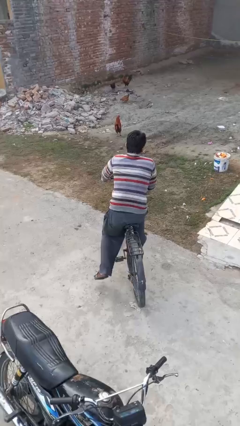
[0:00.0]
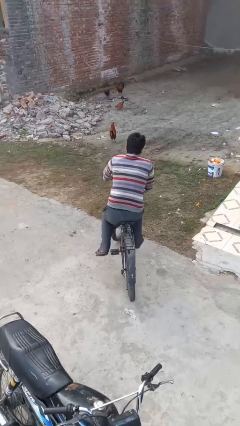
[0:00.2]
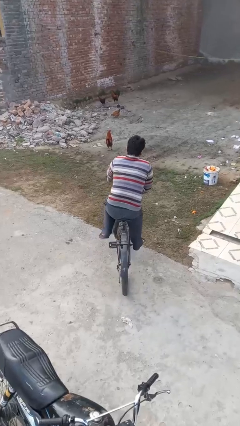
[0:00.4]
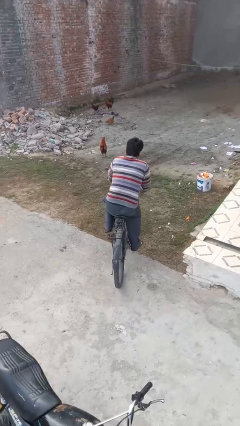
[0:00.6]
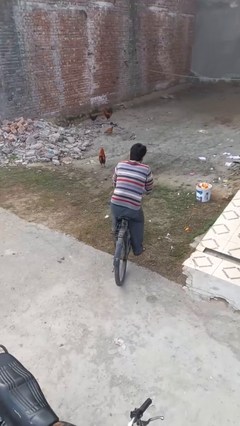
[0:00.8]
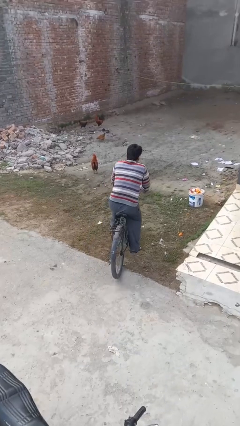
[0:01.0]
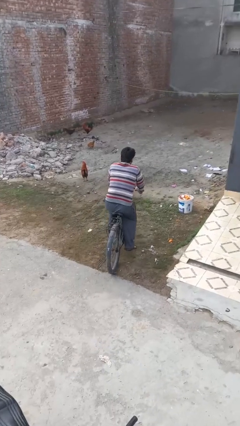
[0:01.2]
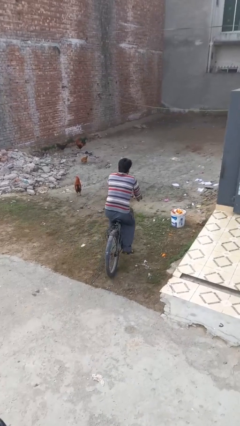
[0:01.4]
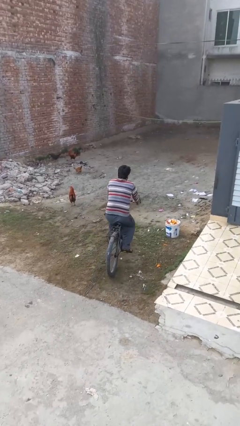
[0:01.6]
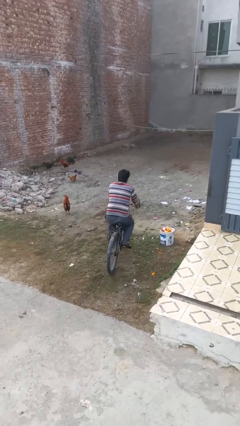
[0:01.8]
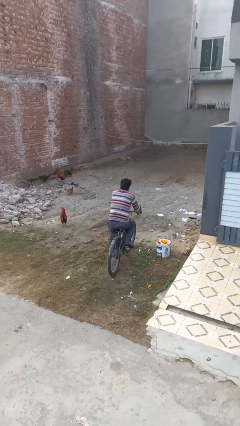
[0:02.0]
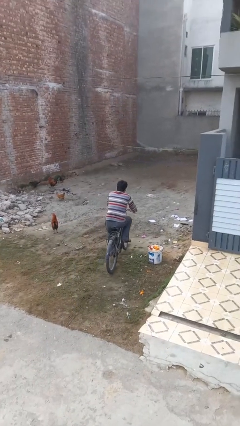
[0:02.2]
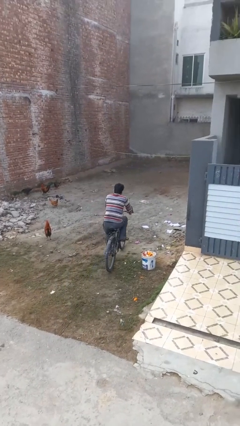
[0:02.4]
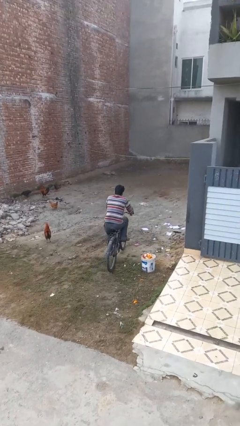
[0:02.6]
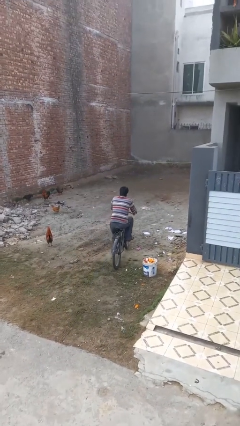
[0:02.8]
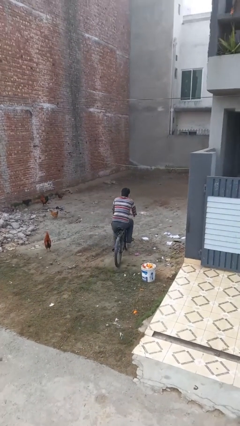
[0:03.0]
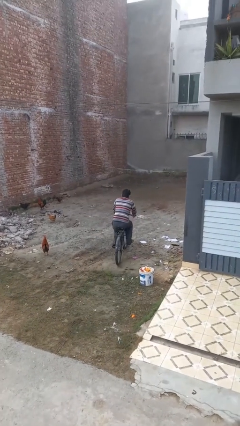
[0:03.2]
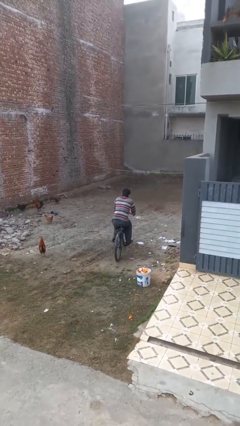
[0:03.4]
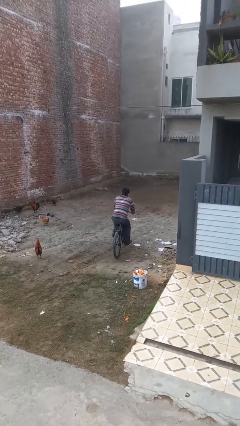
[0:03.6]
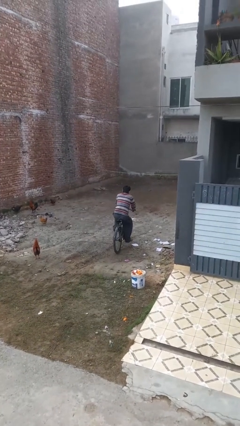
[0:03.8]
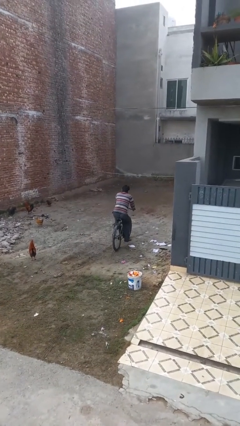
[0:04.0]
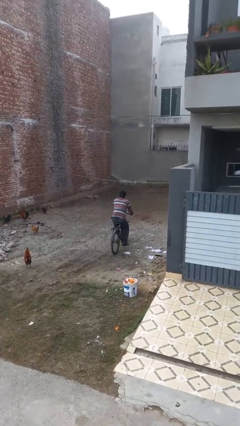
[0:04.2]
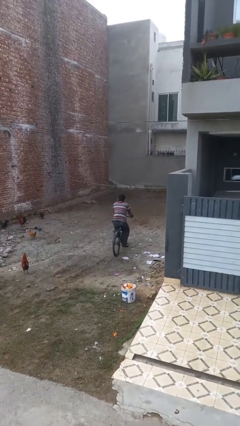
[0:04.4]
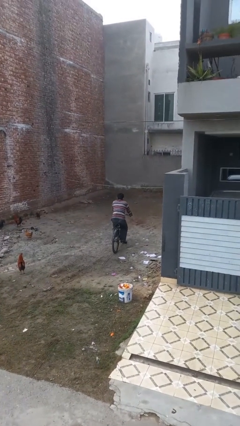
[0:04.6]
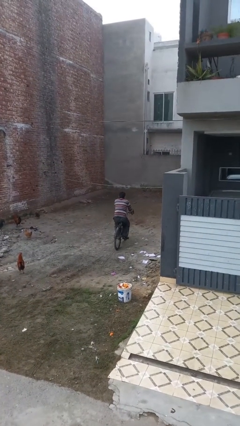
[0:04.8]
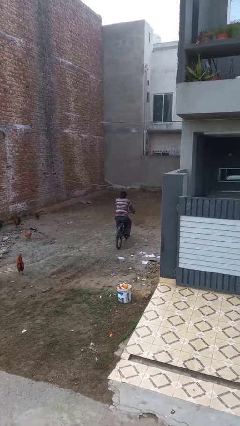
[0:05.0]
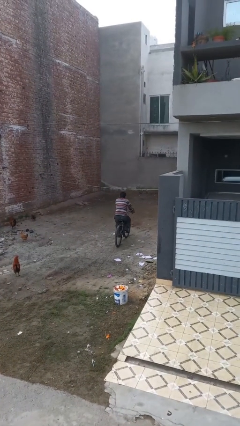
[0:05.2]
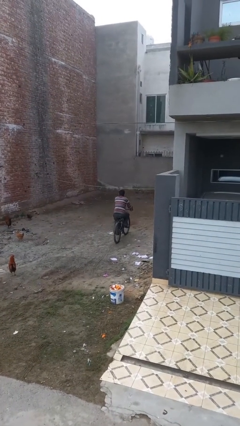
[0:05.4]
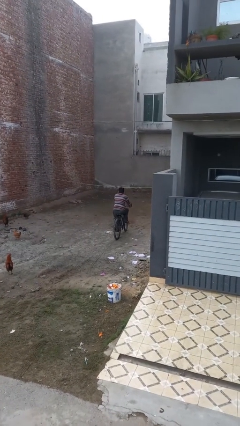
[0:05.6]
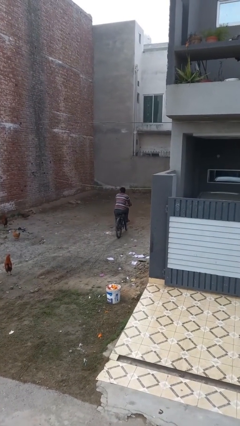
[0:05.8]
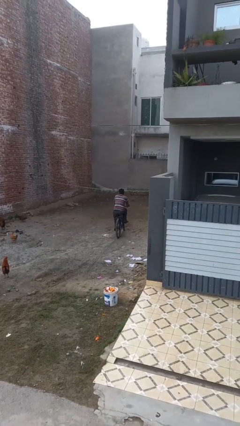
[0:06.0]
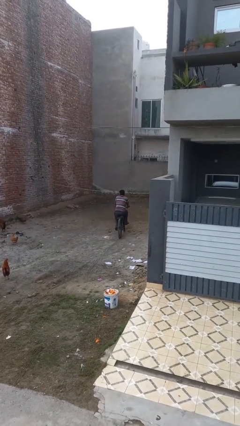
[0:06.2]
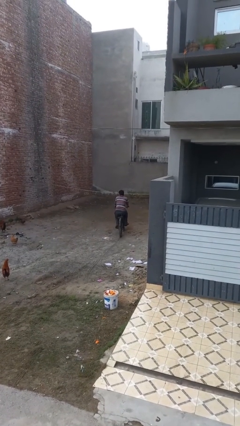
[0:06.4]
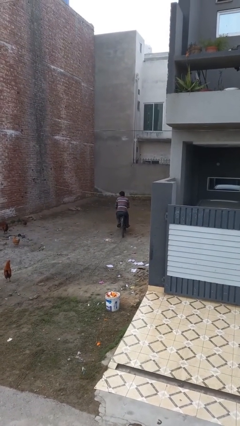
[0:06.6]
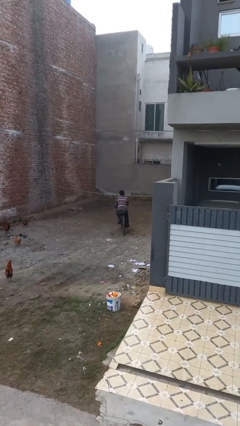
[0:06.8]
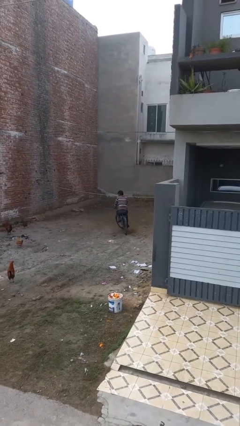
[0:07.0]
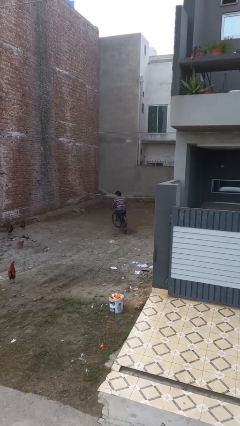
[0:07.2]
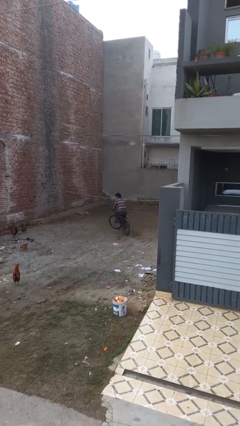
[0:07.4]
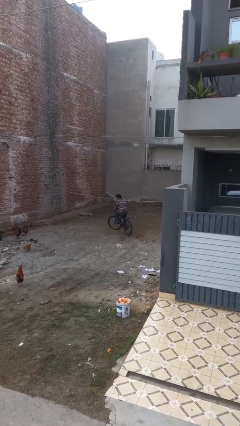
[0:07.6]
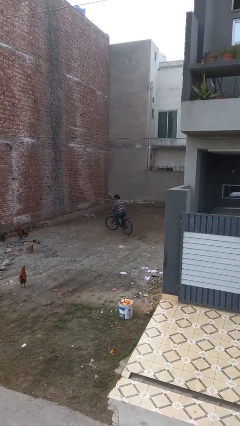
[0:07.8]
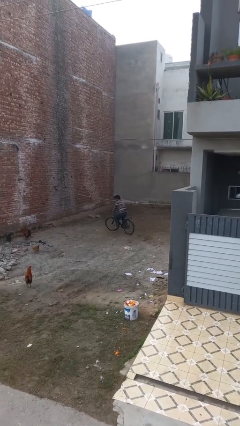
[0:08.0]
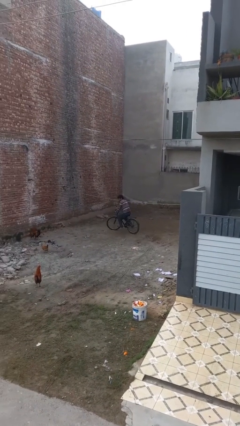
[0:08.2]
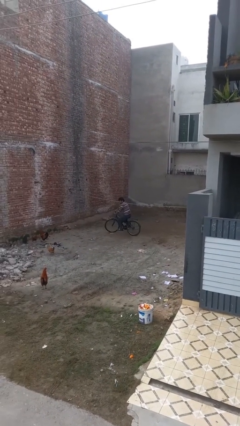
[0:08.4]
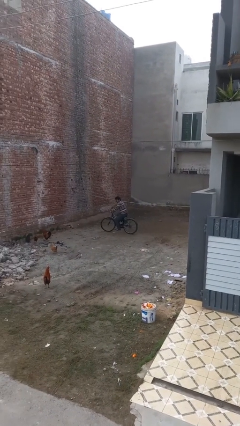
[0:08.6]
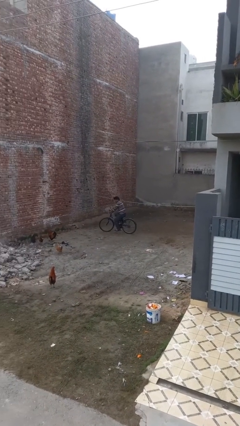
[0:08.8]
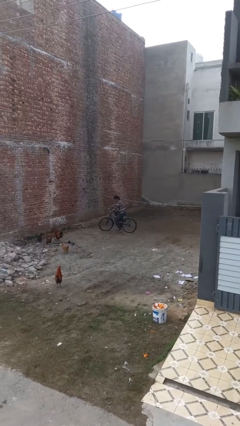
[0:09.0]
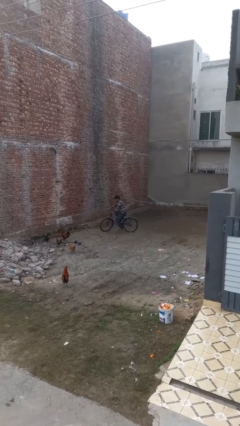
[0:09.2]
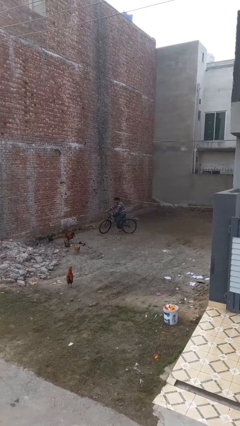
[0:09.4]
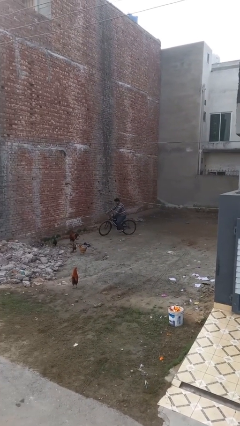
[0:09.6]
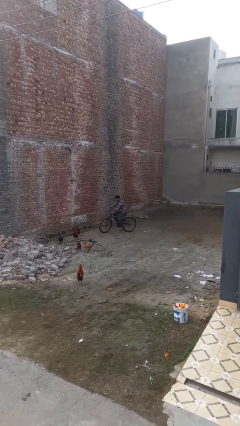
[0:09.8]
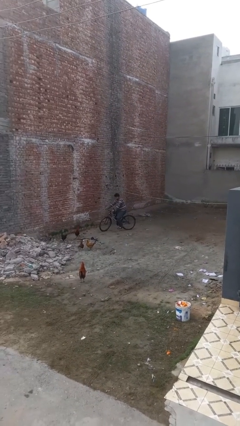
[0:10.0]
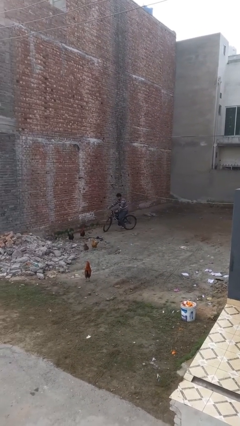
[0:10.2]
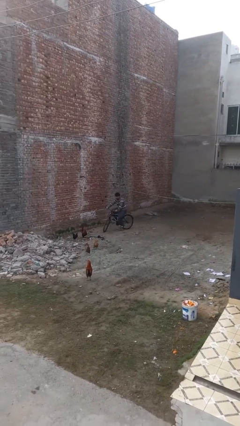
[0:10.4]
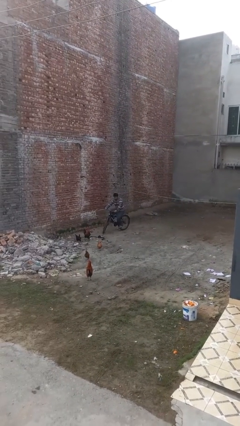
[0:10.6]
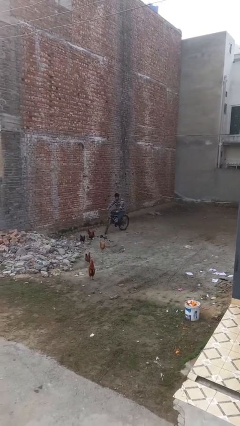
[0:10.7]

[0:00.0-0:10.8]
person rides bicycle

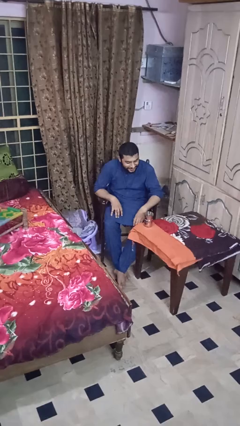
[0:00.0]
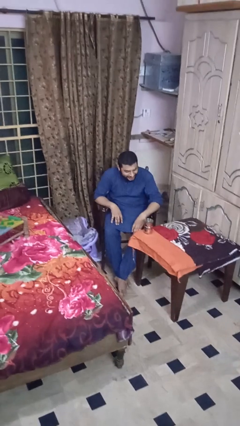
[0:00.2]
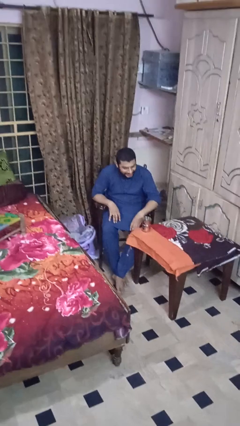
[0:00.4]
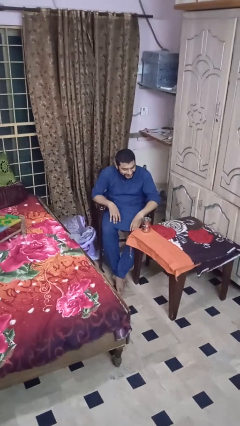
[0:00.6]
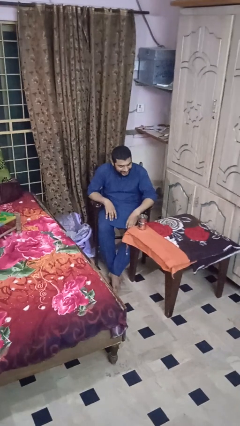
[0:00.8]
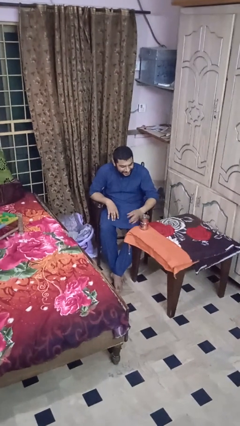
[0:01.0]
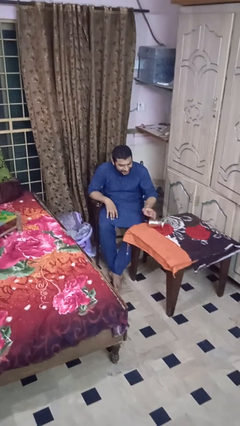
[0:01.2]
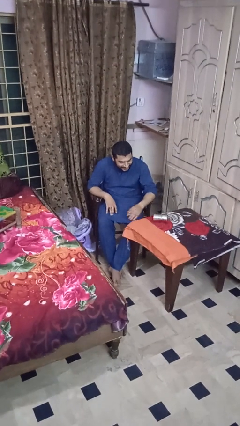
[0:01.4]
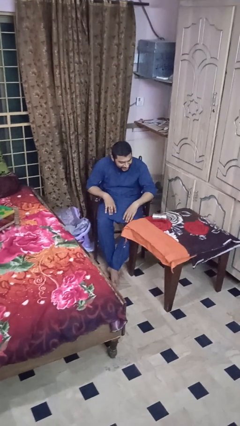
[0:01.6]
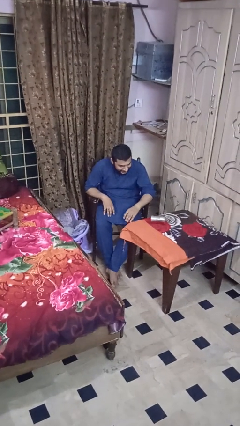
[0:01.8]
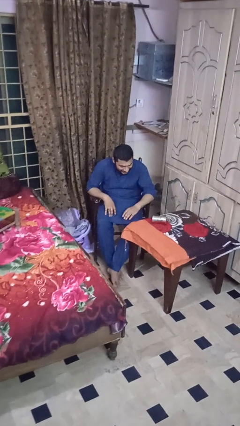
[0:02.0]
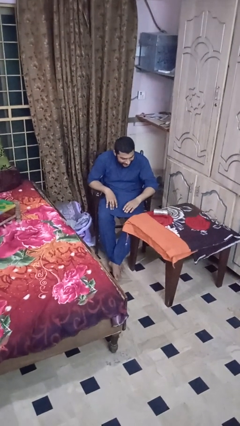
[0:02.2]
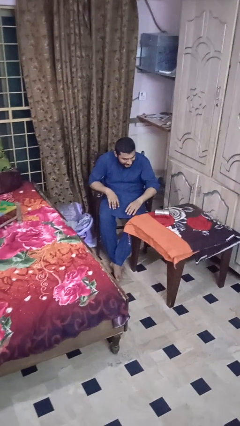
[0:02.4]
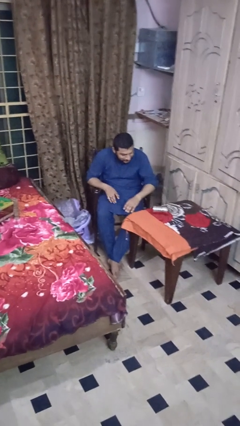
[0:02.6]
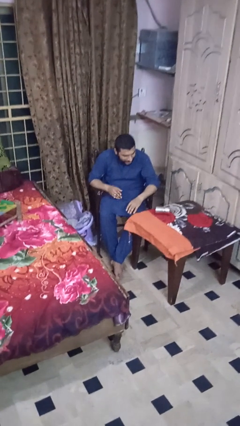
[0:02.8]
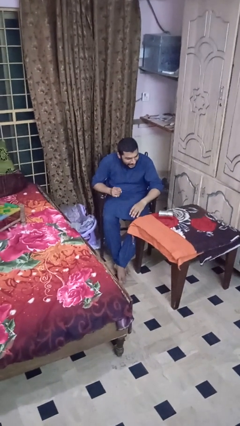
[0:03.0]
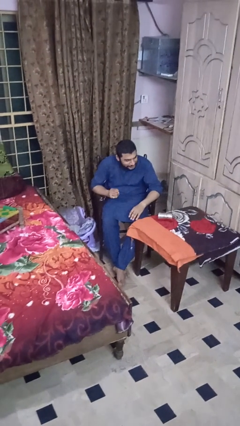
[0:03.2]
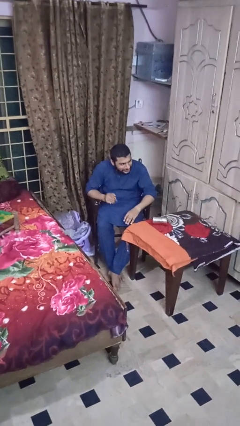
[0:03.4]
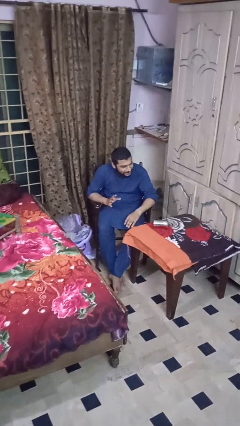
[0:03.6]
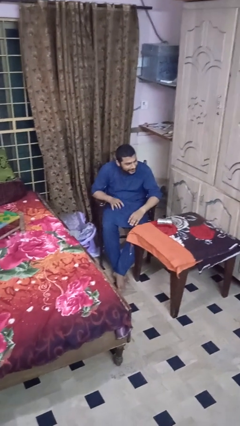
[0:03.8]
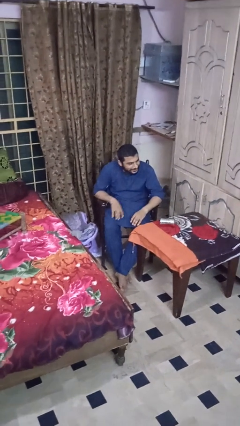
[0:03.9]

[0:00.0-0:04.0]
person knocks over glass

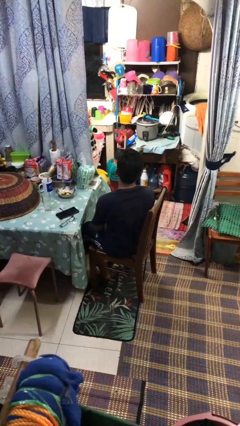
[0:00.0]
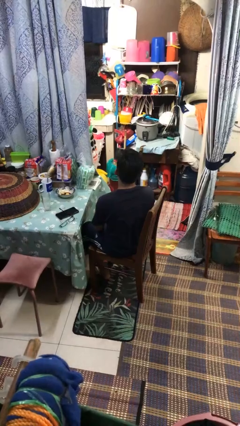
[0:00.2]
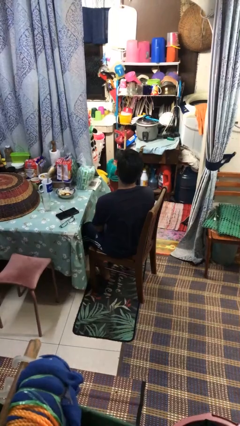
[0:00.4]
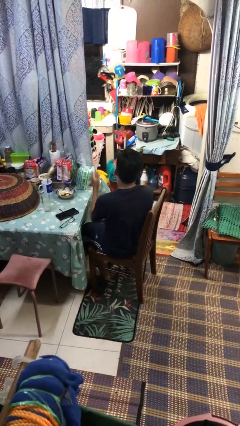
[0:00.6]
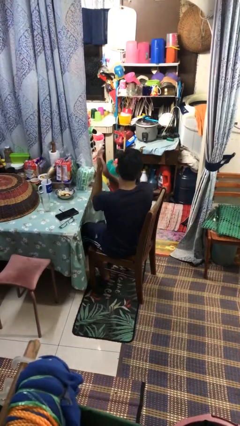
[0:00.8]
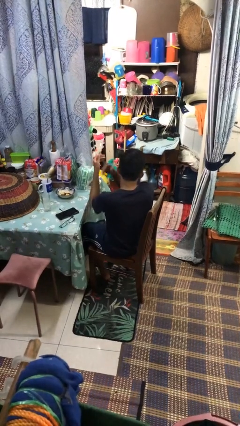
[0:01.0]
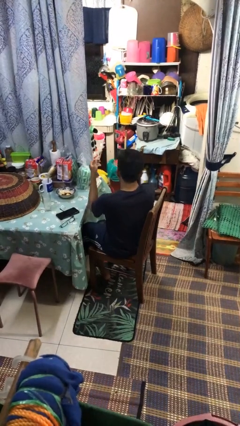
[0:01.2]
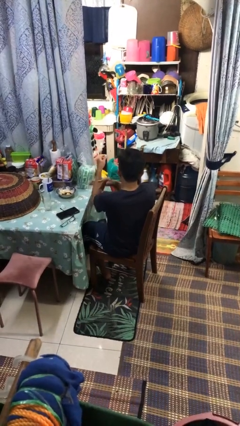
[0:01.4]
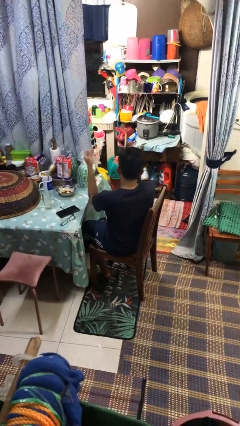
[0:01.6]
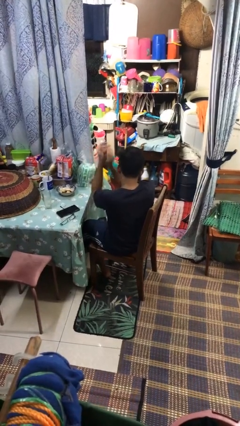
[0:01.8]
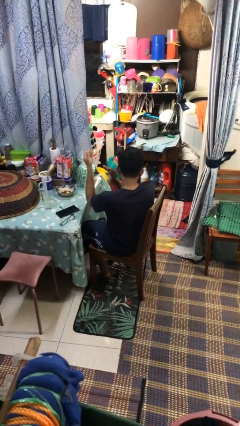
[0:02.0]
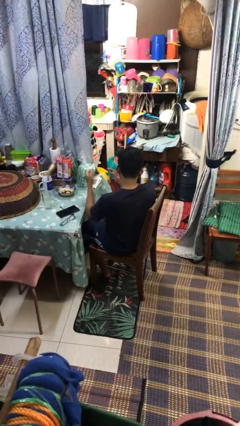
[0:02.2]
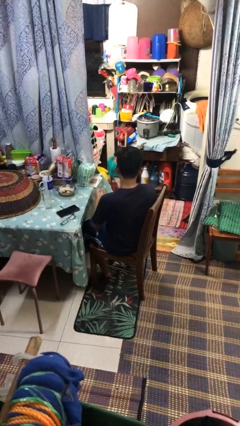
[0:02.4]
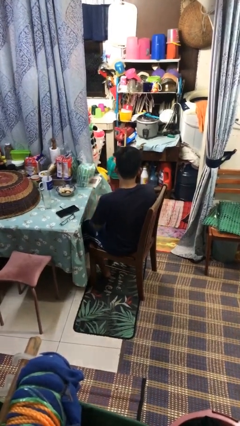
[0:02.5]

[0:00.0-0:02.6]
person swats bug

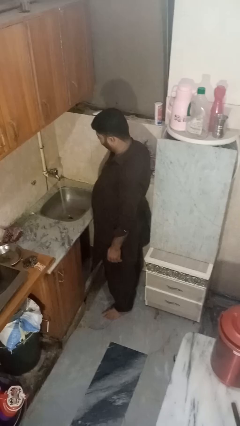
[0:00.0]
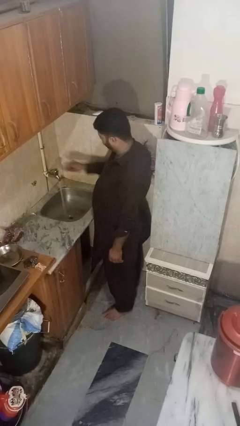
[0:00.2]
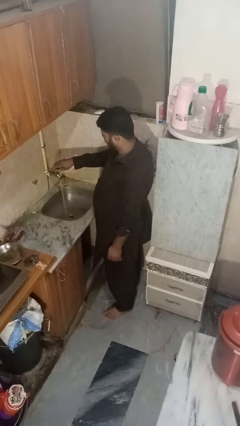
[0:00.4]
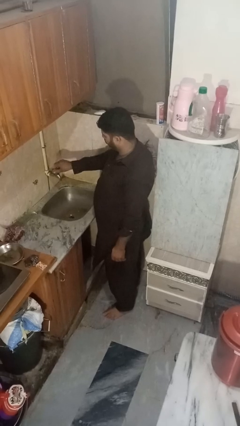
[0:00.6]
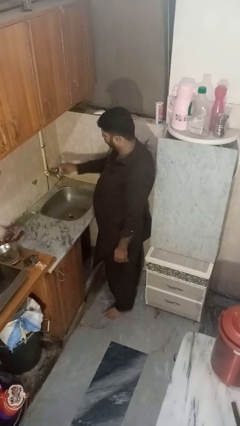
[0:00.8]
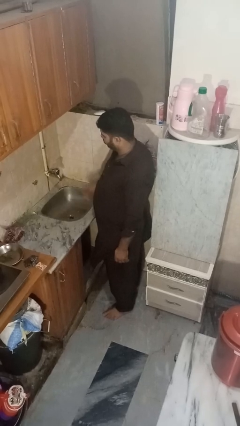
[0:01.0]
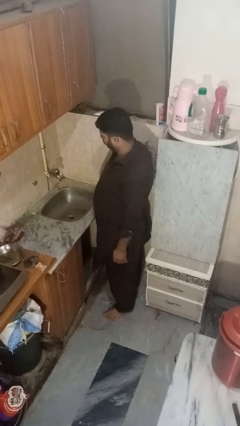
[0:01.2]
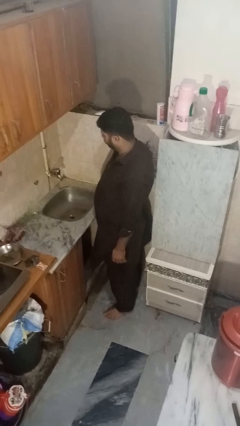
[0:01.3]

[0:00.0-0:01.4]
person turns off faucet
